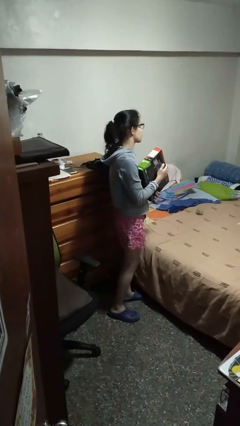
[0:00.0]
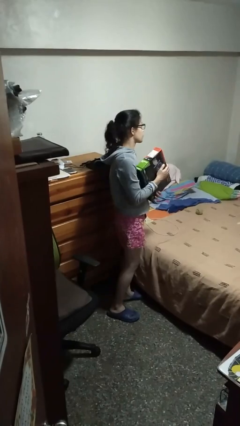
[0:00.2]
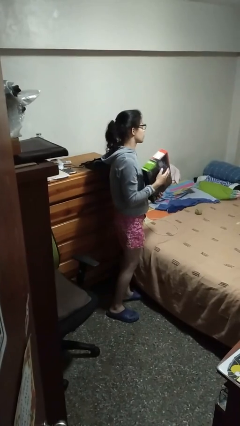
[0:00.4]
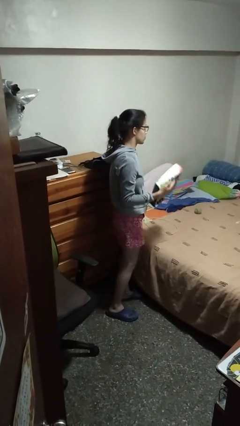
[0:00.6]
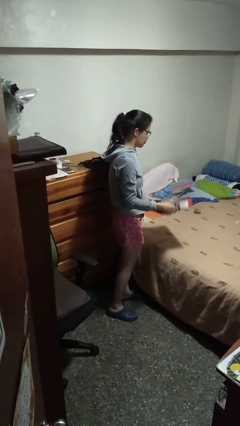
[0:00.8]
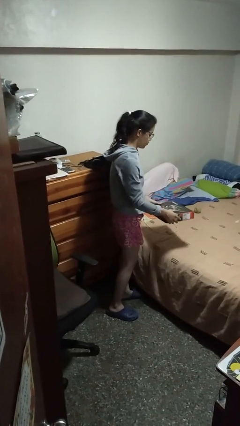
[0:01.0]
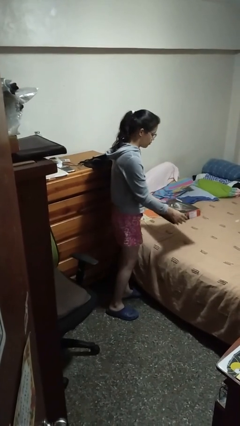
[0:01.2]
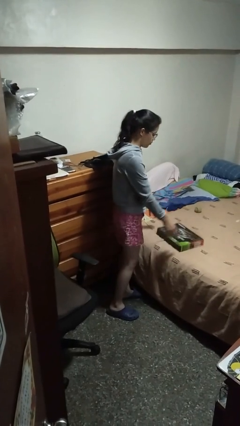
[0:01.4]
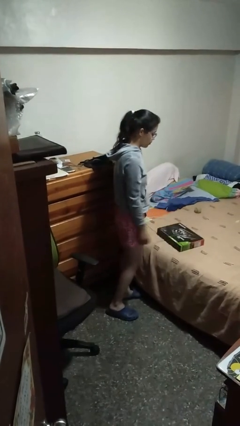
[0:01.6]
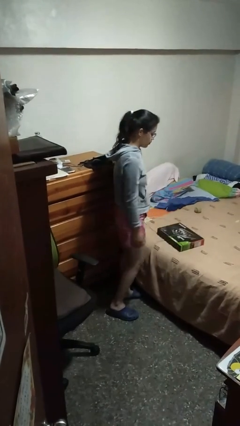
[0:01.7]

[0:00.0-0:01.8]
person puts down object on bed

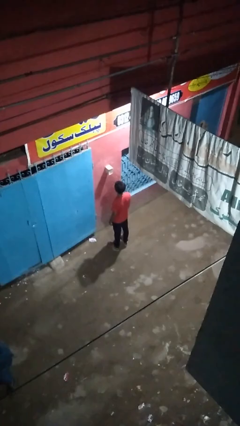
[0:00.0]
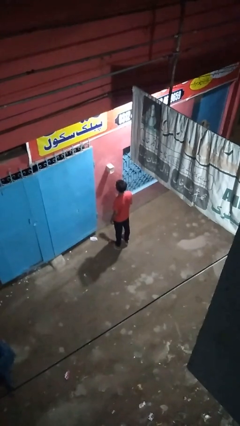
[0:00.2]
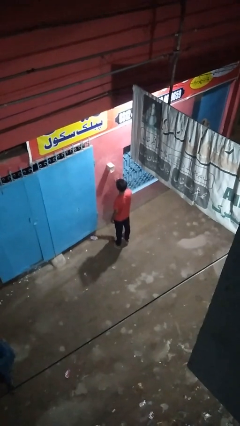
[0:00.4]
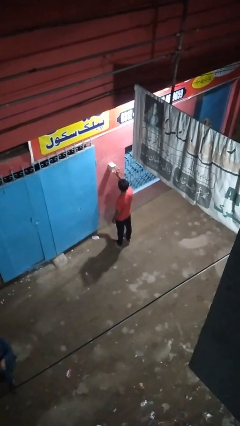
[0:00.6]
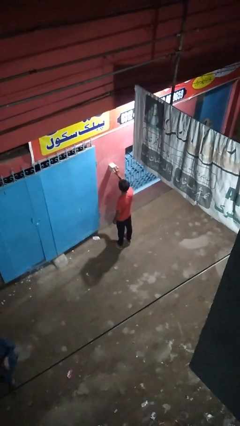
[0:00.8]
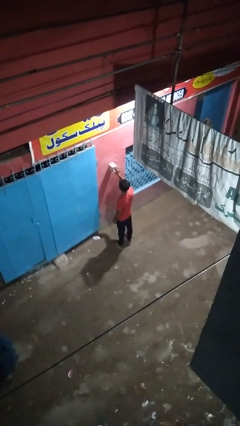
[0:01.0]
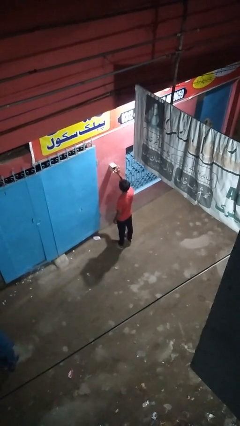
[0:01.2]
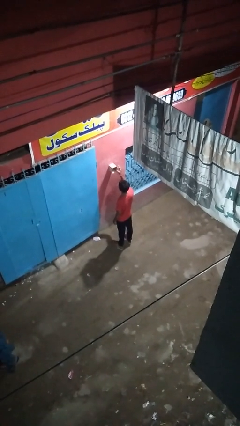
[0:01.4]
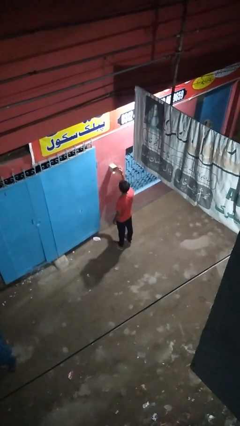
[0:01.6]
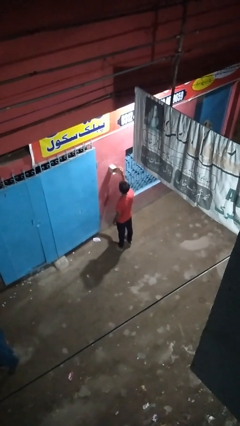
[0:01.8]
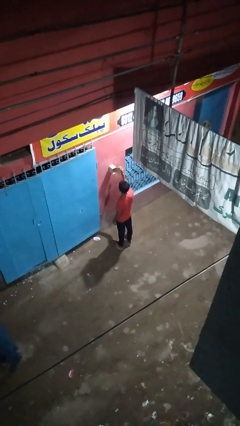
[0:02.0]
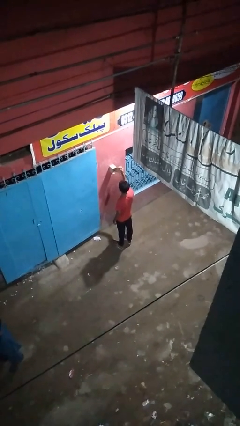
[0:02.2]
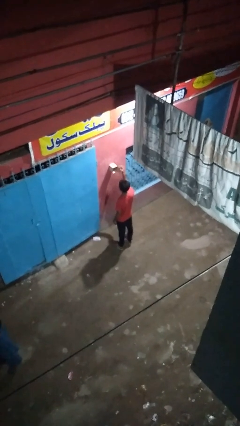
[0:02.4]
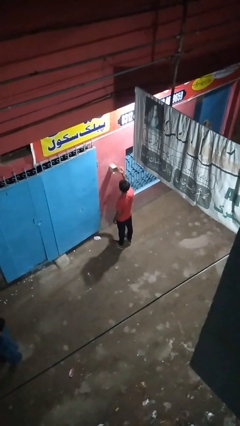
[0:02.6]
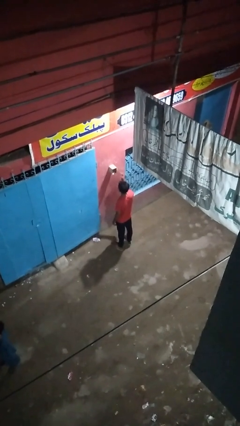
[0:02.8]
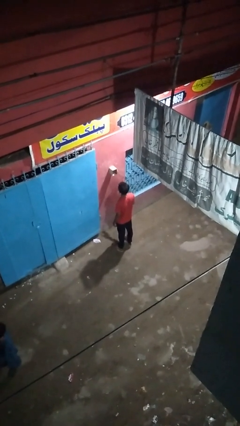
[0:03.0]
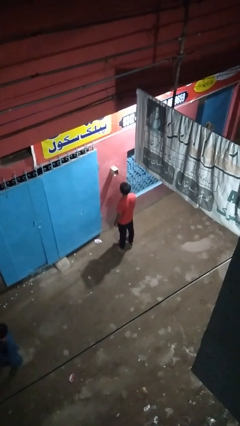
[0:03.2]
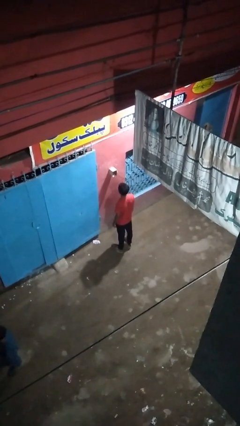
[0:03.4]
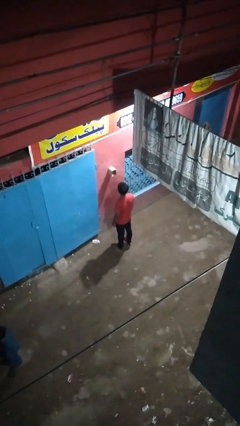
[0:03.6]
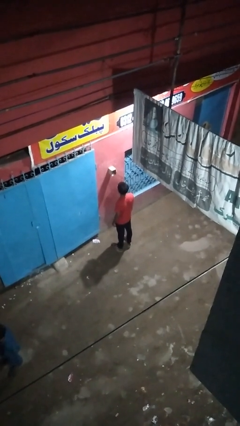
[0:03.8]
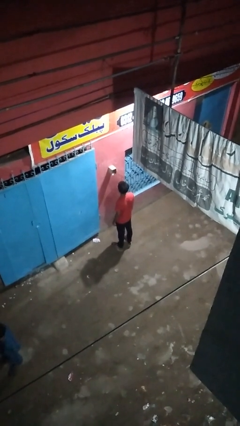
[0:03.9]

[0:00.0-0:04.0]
person opens mailbox

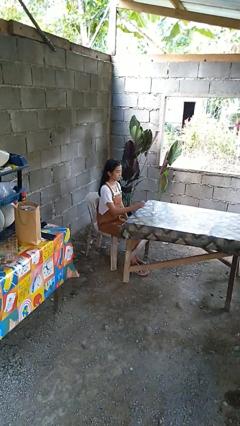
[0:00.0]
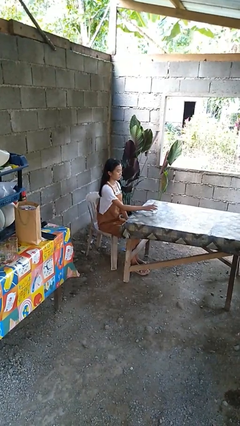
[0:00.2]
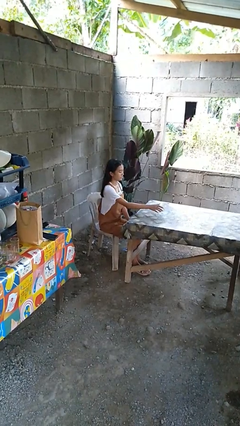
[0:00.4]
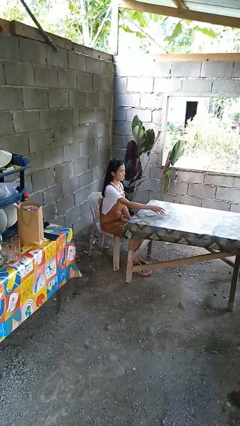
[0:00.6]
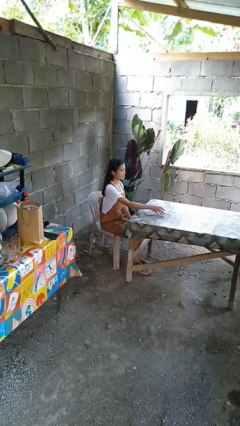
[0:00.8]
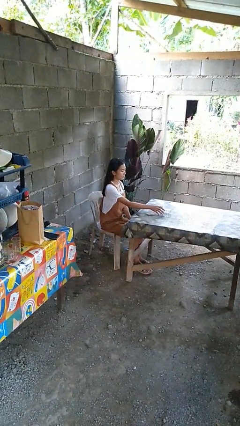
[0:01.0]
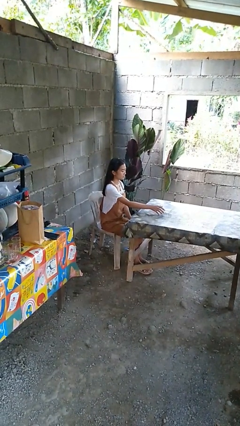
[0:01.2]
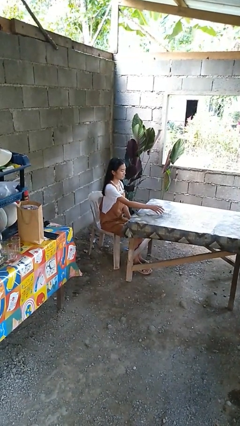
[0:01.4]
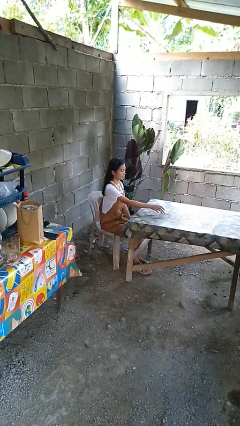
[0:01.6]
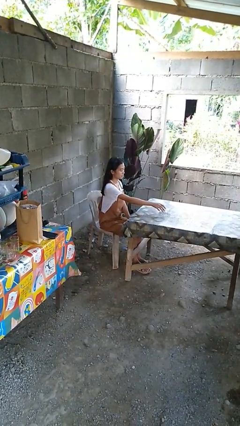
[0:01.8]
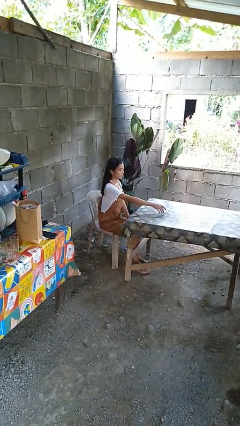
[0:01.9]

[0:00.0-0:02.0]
person knocks over glass

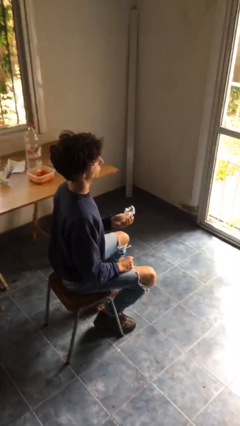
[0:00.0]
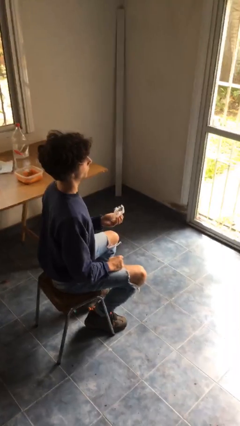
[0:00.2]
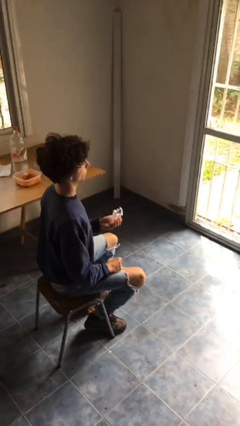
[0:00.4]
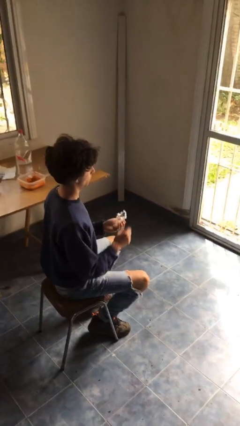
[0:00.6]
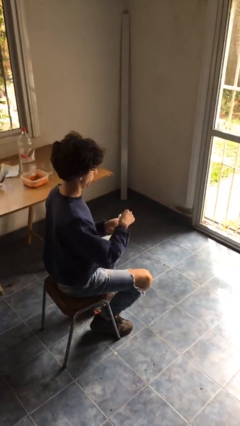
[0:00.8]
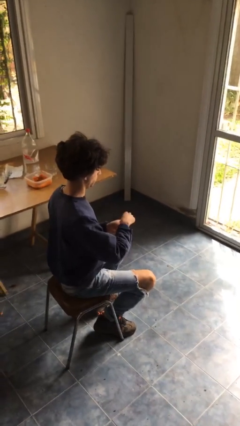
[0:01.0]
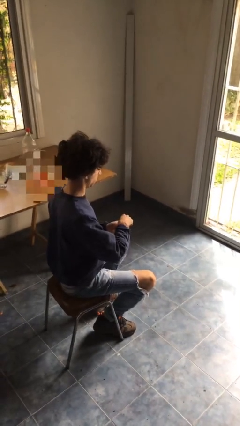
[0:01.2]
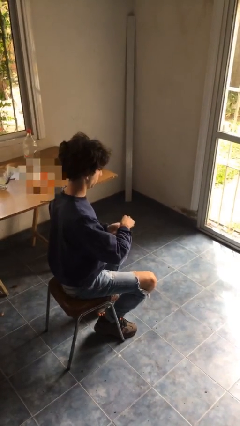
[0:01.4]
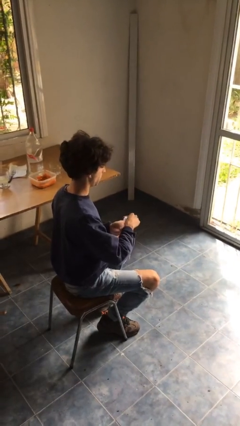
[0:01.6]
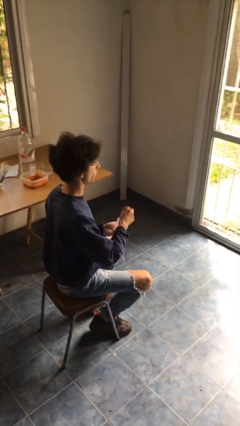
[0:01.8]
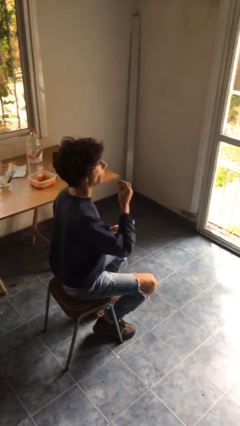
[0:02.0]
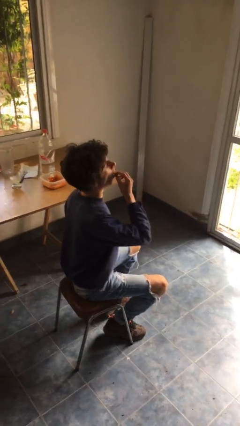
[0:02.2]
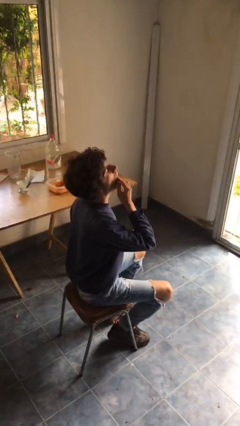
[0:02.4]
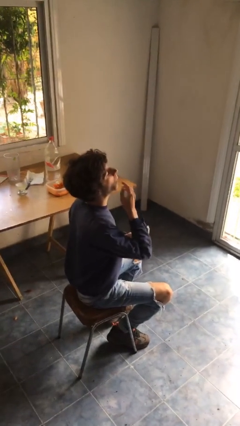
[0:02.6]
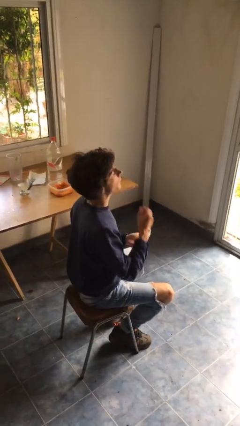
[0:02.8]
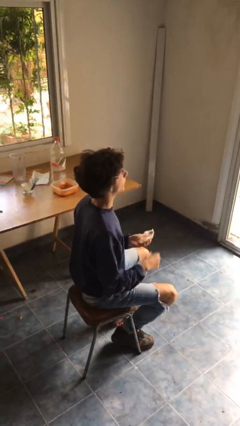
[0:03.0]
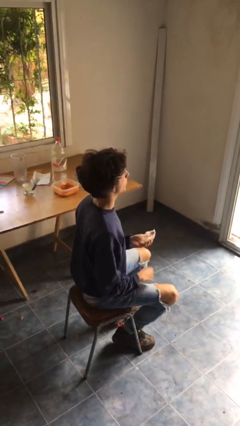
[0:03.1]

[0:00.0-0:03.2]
person eats snack from bag

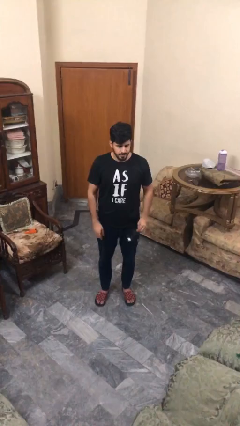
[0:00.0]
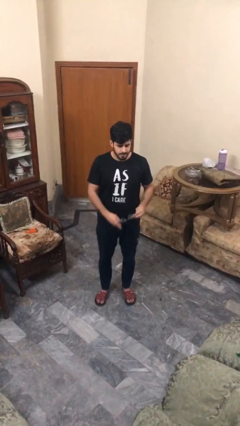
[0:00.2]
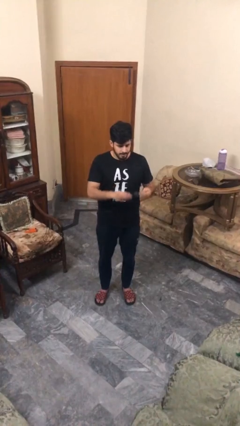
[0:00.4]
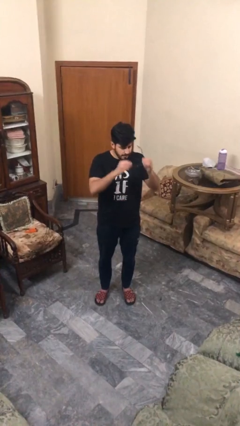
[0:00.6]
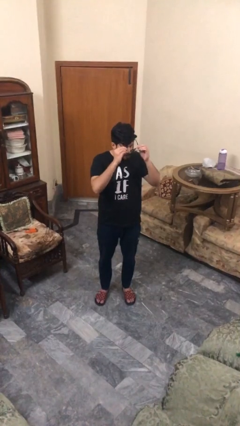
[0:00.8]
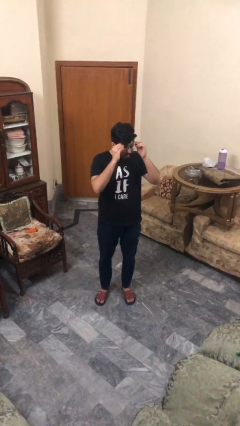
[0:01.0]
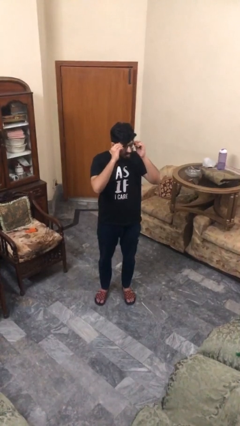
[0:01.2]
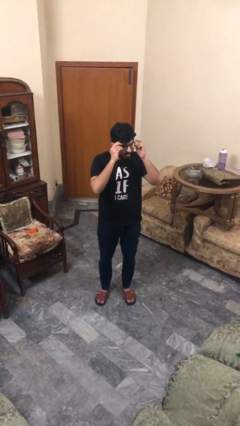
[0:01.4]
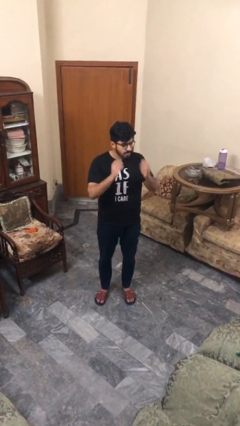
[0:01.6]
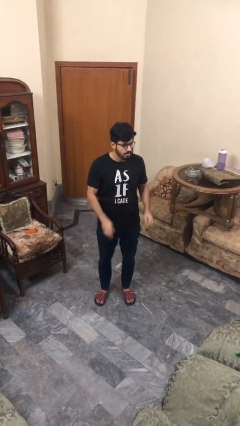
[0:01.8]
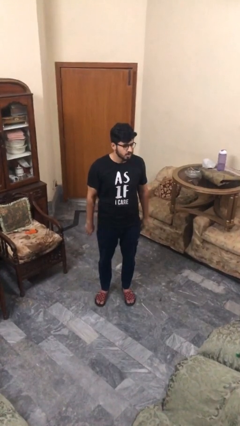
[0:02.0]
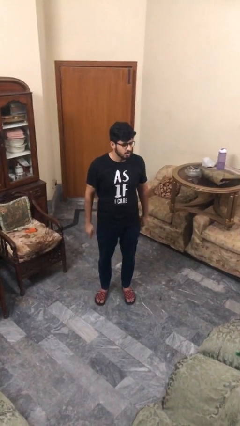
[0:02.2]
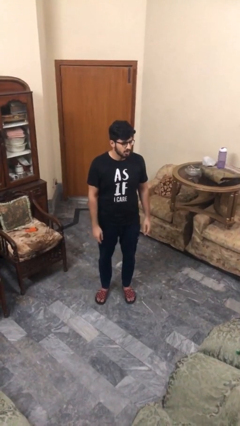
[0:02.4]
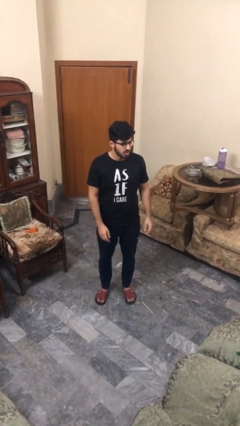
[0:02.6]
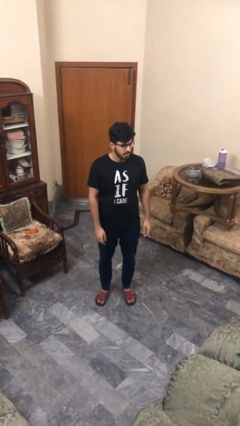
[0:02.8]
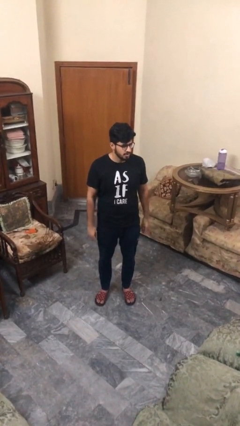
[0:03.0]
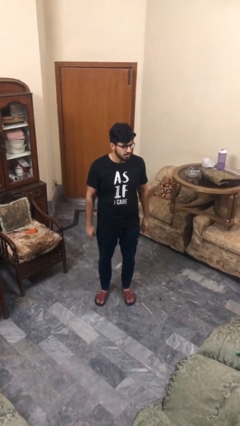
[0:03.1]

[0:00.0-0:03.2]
person puts on glasses

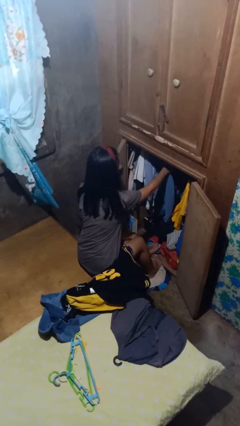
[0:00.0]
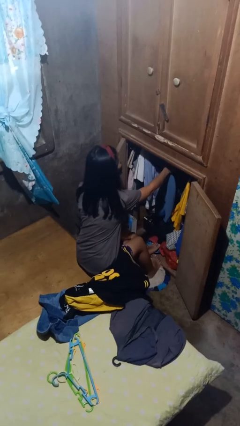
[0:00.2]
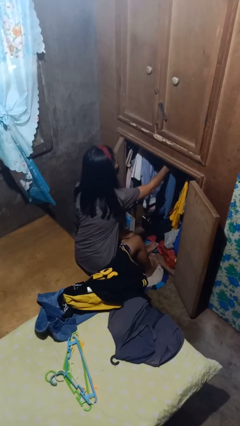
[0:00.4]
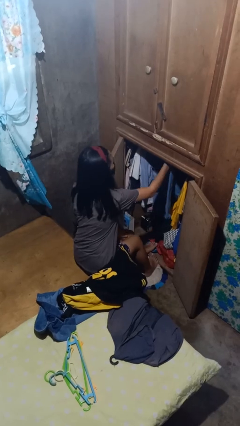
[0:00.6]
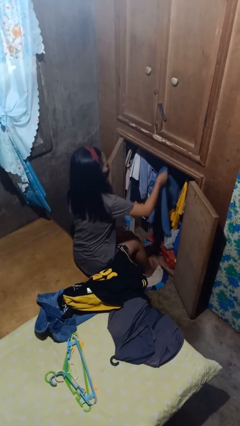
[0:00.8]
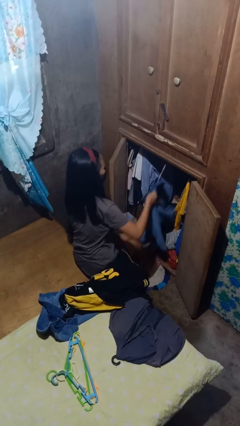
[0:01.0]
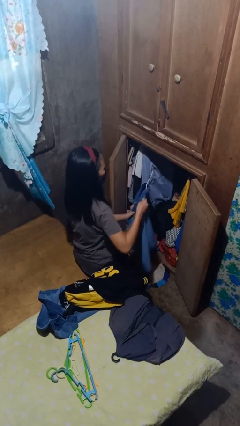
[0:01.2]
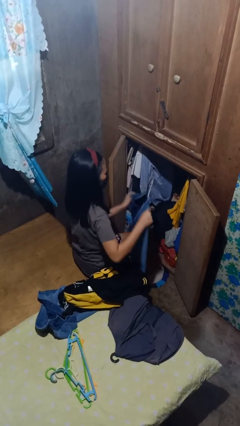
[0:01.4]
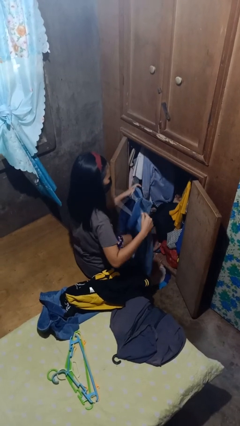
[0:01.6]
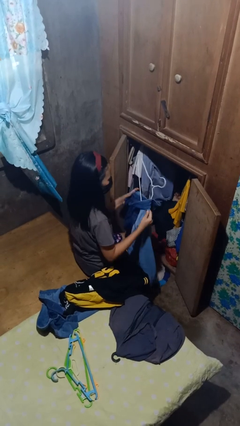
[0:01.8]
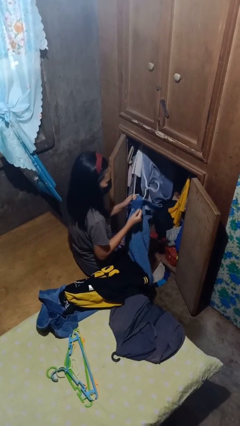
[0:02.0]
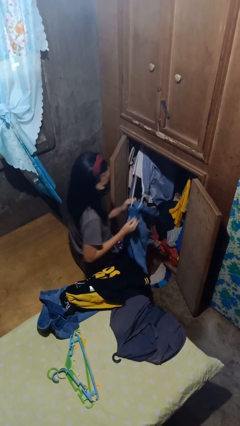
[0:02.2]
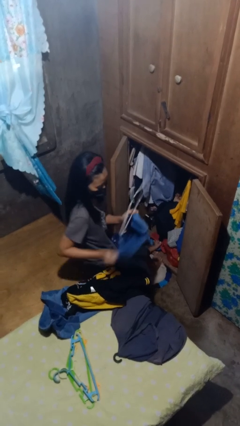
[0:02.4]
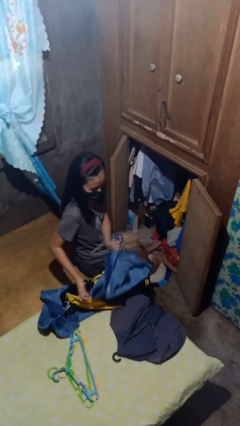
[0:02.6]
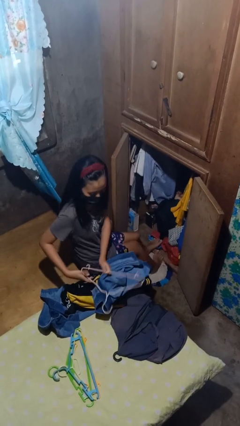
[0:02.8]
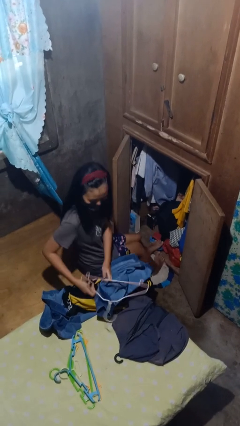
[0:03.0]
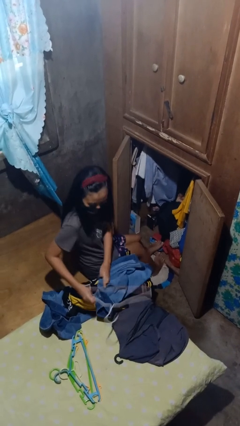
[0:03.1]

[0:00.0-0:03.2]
person takes clothes from closet
